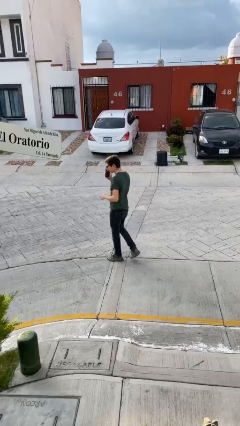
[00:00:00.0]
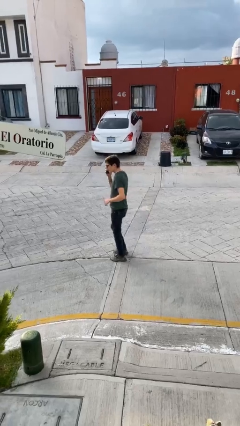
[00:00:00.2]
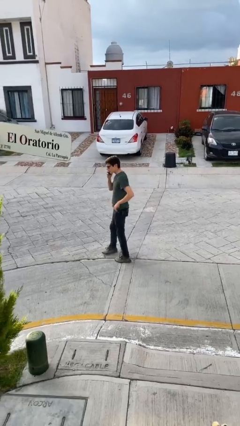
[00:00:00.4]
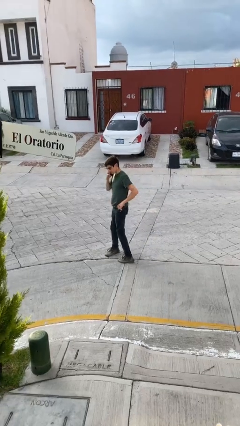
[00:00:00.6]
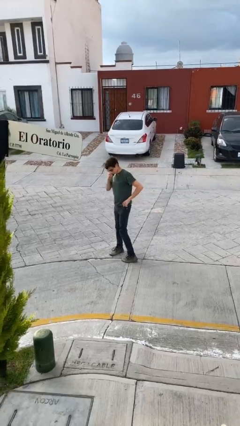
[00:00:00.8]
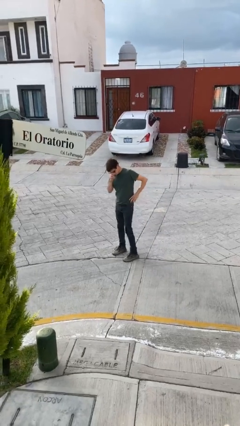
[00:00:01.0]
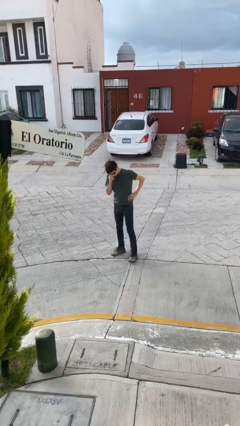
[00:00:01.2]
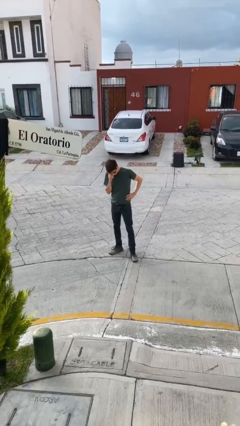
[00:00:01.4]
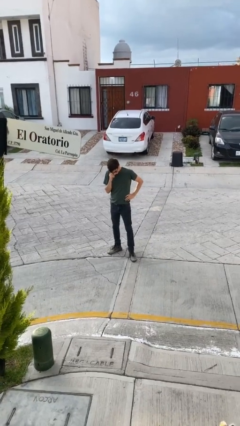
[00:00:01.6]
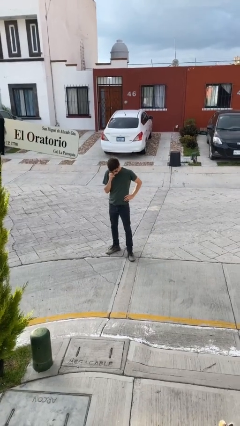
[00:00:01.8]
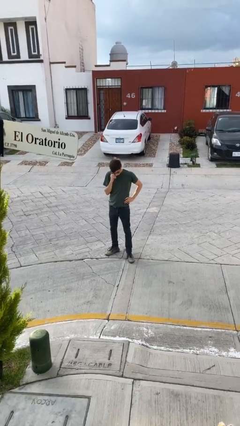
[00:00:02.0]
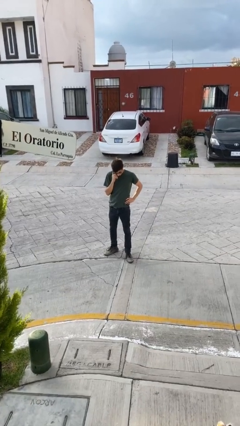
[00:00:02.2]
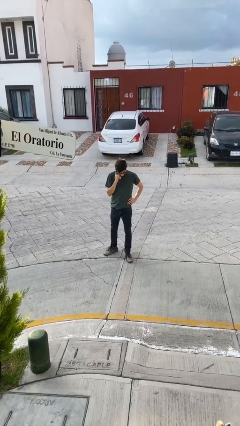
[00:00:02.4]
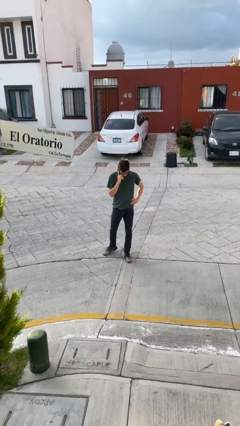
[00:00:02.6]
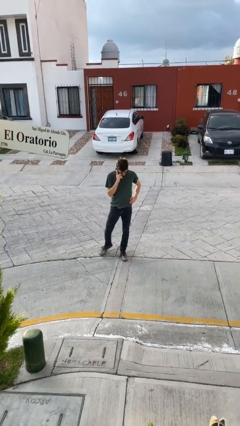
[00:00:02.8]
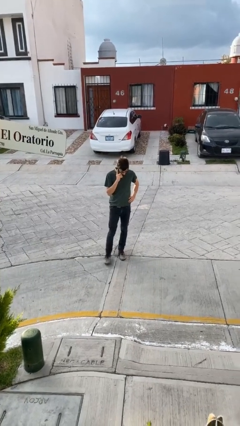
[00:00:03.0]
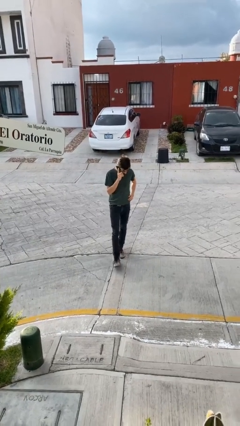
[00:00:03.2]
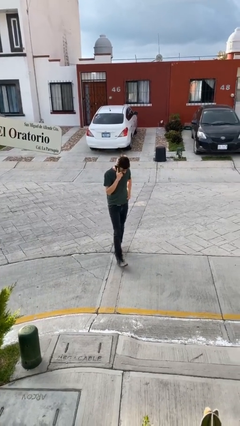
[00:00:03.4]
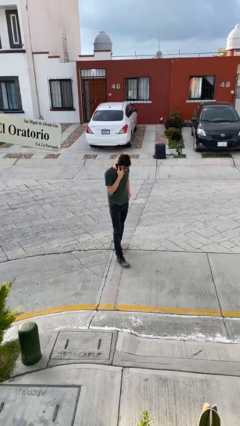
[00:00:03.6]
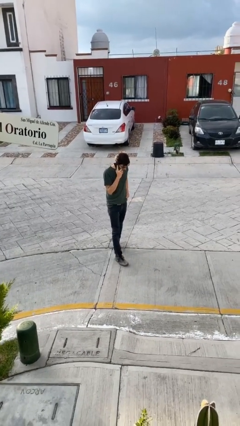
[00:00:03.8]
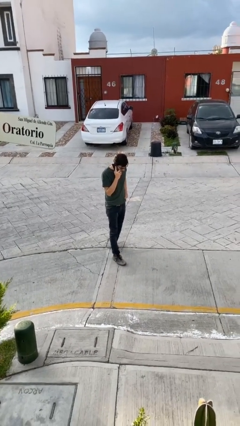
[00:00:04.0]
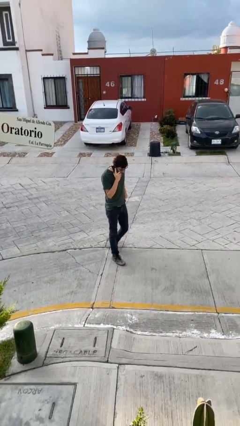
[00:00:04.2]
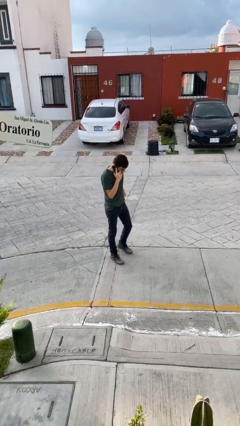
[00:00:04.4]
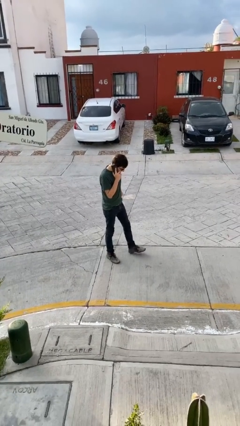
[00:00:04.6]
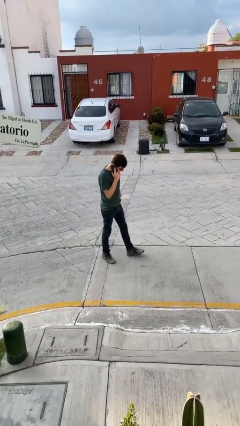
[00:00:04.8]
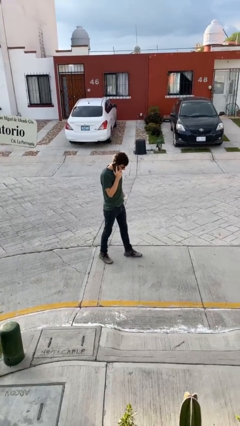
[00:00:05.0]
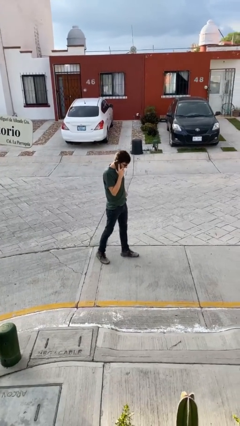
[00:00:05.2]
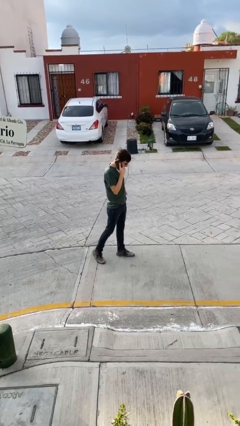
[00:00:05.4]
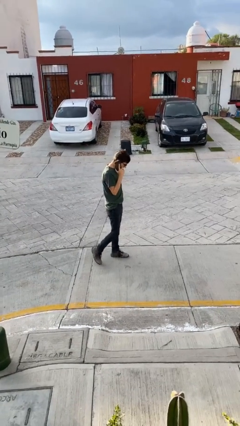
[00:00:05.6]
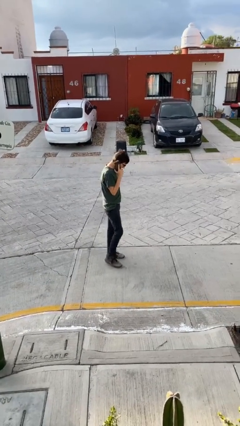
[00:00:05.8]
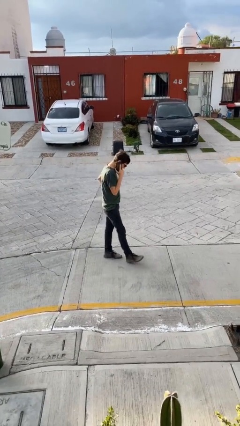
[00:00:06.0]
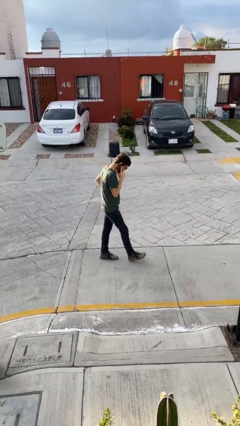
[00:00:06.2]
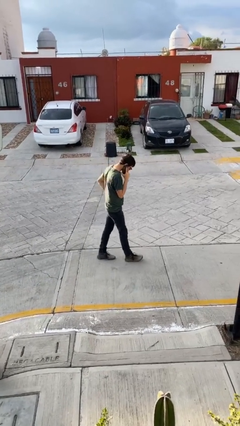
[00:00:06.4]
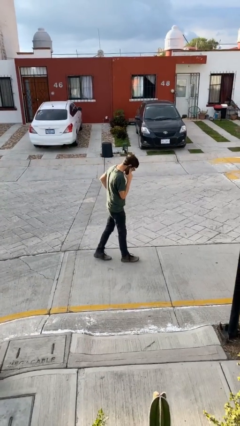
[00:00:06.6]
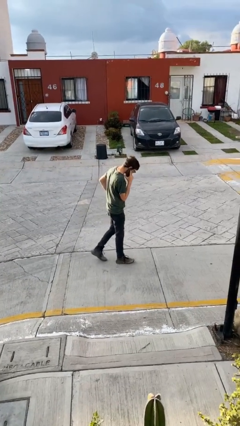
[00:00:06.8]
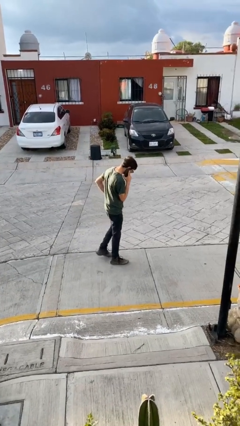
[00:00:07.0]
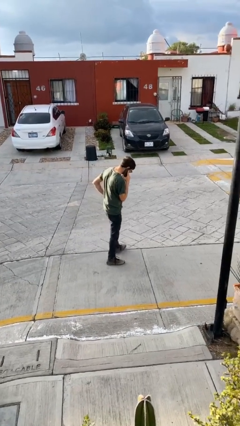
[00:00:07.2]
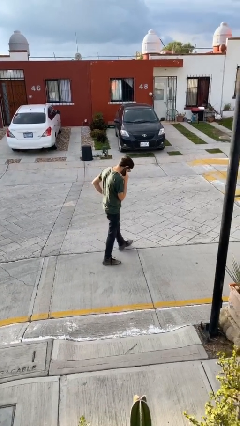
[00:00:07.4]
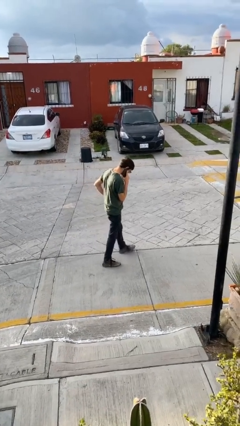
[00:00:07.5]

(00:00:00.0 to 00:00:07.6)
person talks on phone

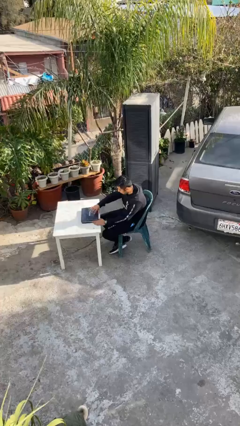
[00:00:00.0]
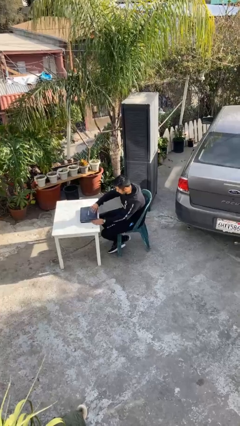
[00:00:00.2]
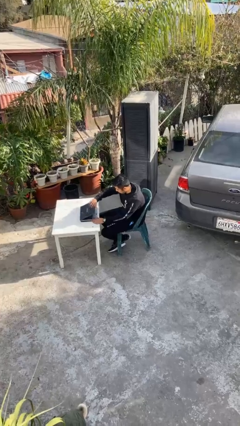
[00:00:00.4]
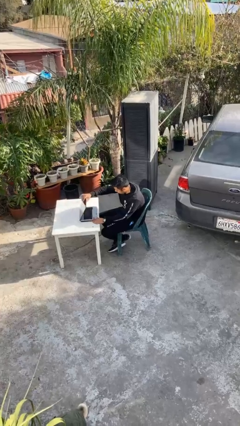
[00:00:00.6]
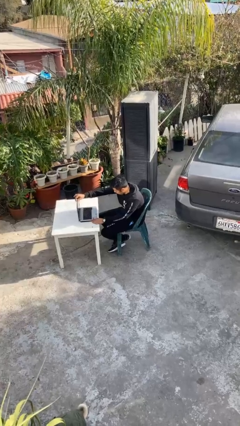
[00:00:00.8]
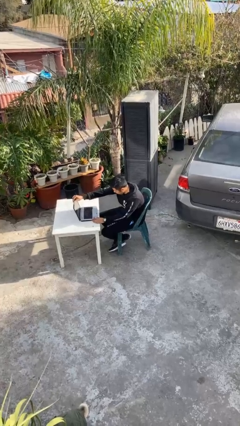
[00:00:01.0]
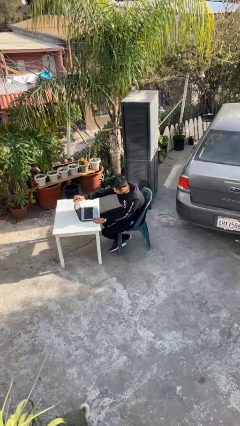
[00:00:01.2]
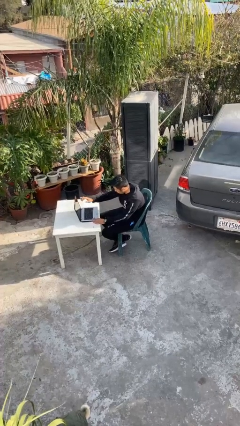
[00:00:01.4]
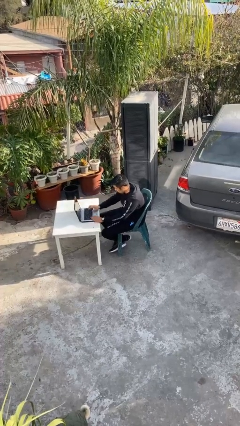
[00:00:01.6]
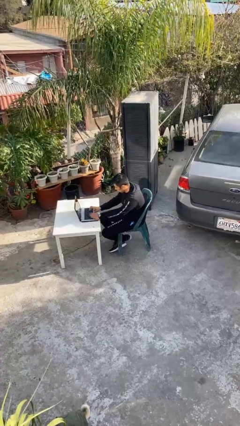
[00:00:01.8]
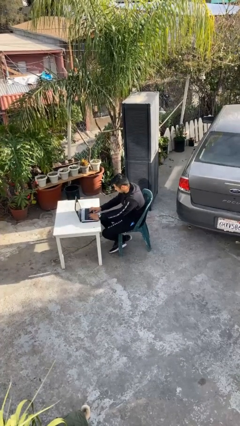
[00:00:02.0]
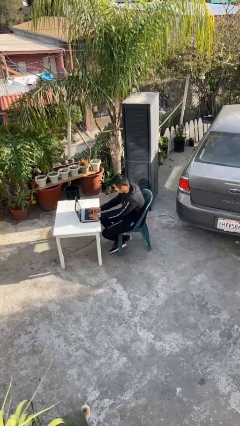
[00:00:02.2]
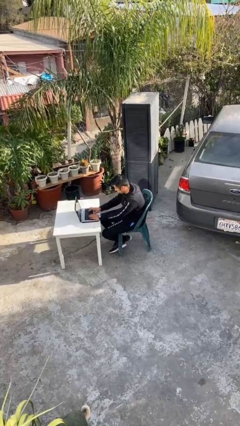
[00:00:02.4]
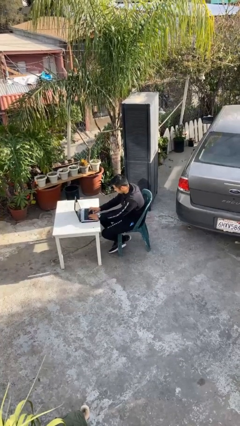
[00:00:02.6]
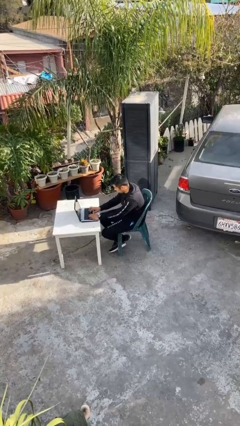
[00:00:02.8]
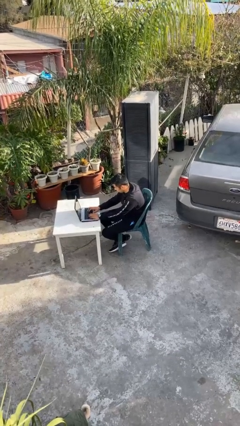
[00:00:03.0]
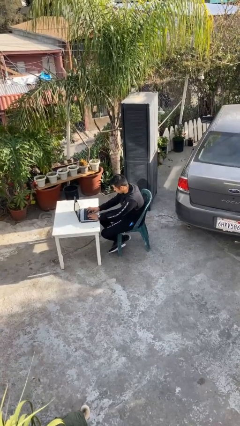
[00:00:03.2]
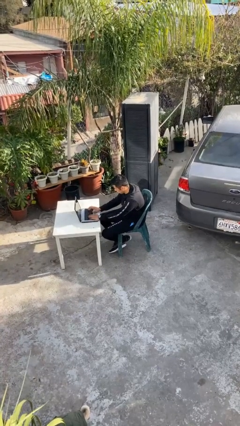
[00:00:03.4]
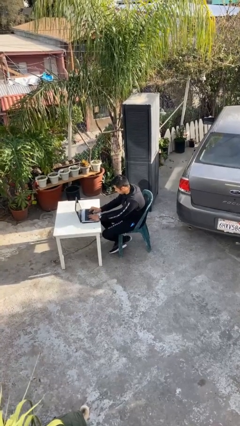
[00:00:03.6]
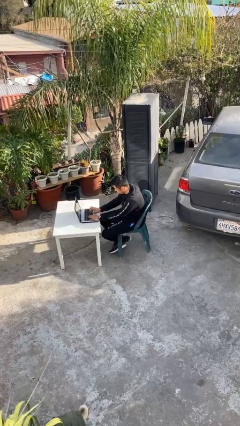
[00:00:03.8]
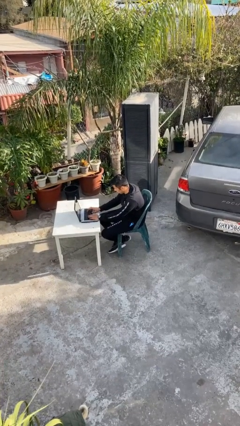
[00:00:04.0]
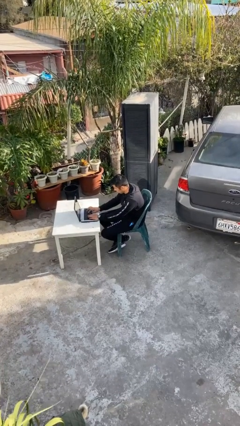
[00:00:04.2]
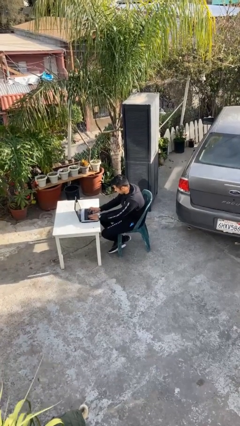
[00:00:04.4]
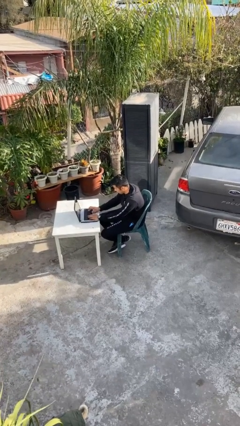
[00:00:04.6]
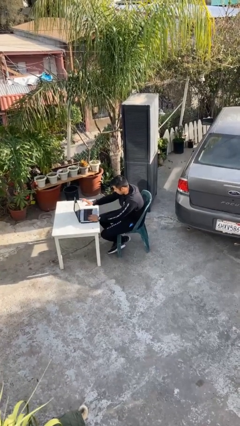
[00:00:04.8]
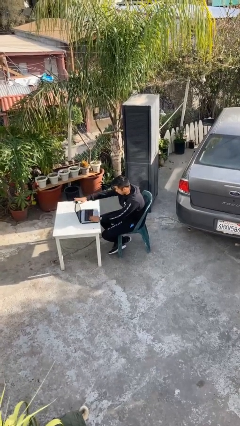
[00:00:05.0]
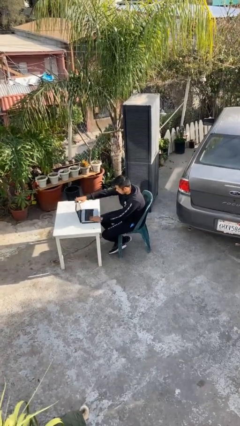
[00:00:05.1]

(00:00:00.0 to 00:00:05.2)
person interacts with laptop

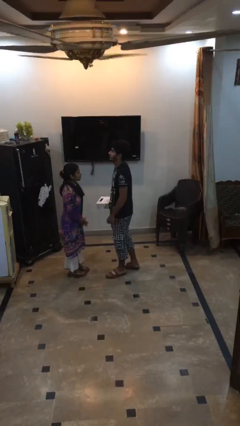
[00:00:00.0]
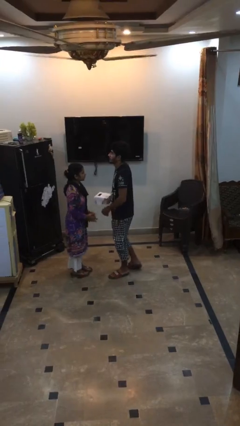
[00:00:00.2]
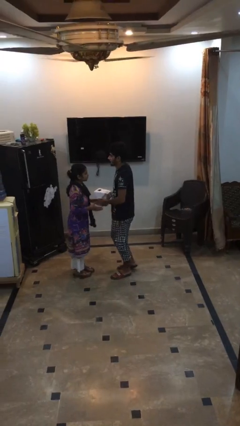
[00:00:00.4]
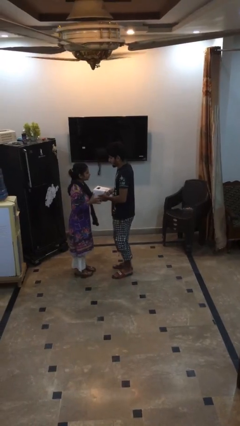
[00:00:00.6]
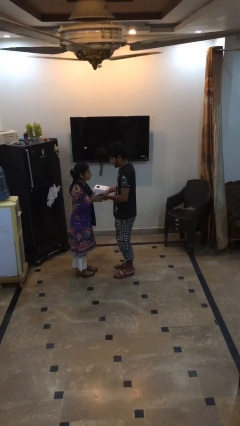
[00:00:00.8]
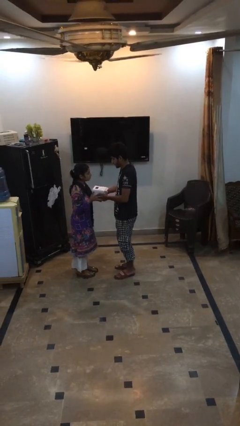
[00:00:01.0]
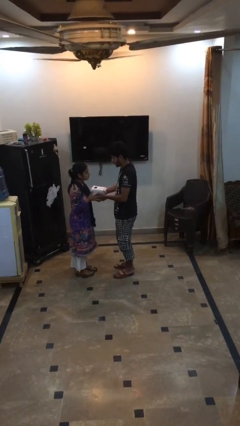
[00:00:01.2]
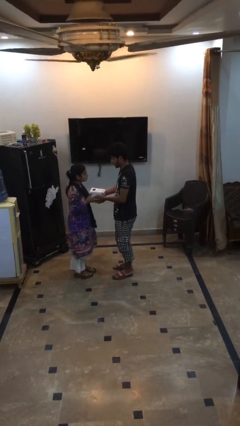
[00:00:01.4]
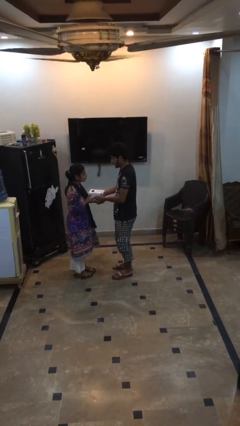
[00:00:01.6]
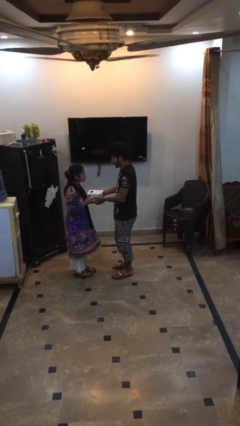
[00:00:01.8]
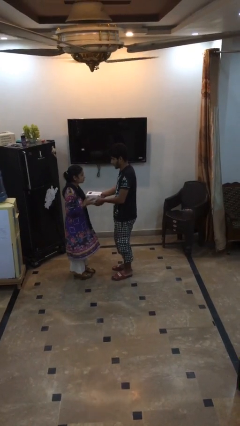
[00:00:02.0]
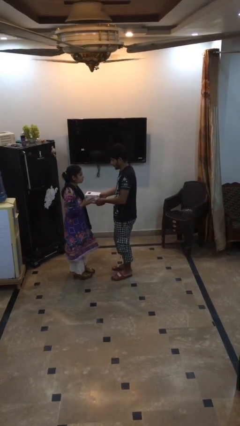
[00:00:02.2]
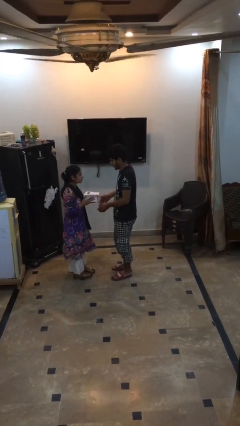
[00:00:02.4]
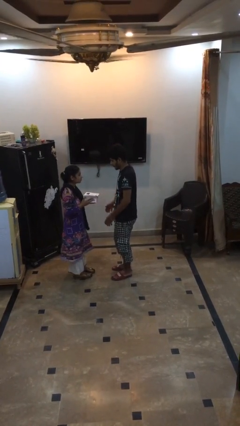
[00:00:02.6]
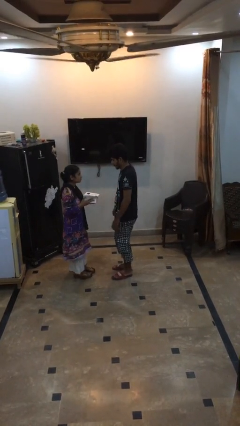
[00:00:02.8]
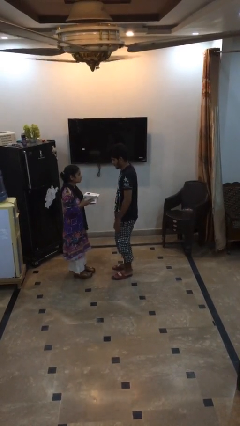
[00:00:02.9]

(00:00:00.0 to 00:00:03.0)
person transfers object to person

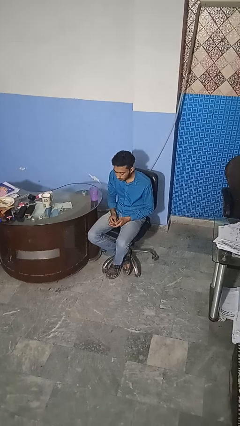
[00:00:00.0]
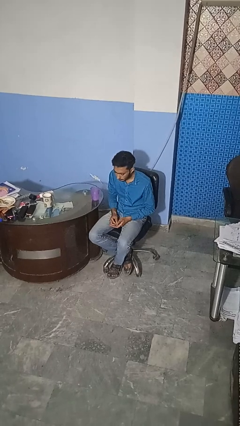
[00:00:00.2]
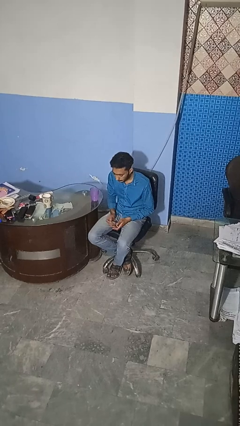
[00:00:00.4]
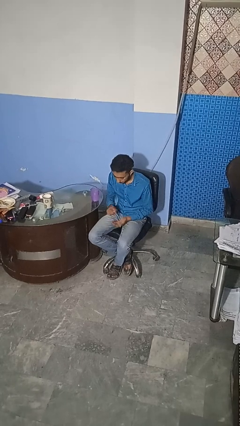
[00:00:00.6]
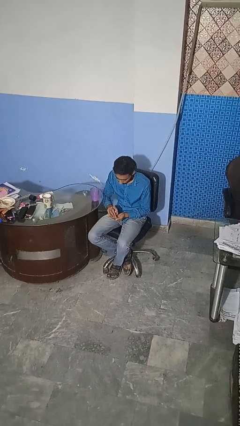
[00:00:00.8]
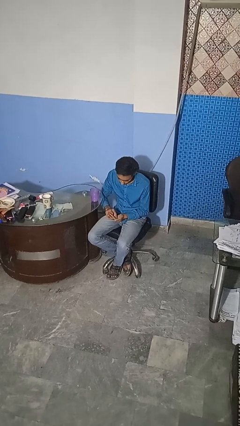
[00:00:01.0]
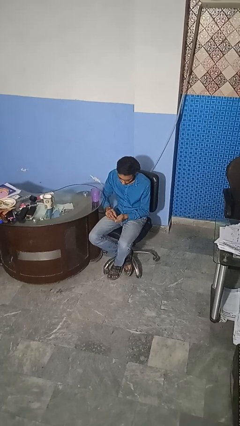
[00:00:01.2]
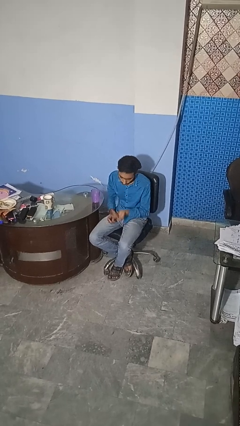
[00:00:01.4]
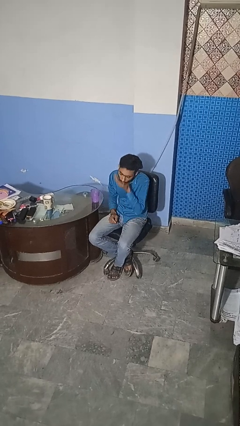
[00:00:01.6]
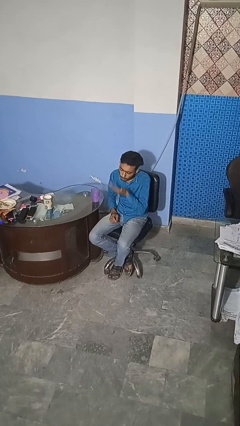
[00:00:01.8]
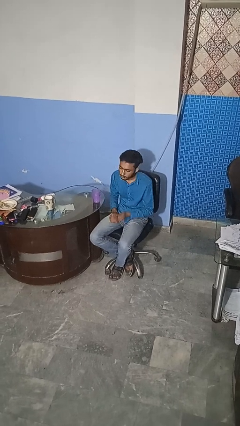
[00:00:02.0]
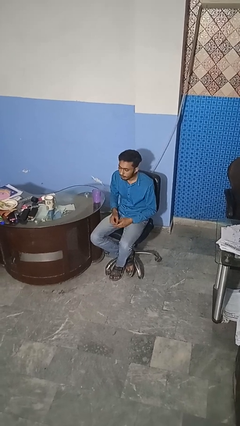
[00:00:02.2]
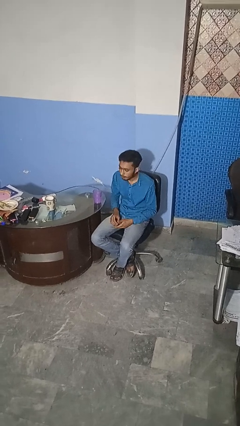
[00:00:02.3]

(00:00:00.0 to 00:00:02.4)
person takes medicine pills
